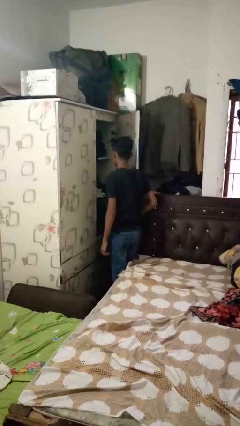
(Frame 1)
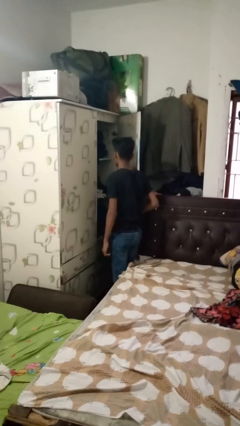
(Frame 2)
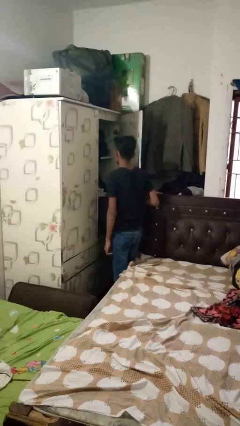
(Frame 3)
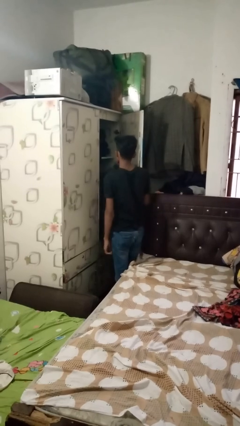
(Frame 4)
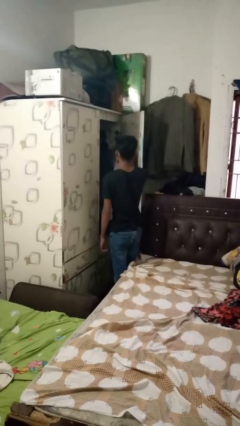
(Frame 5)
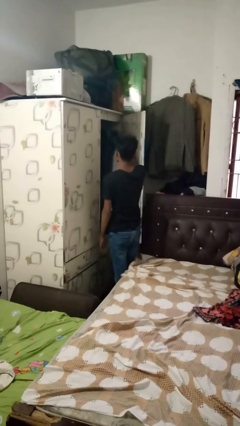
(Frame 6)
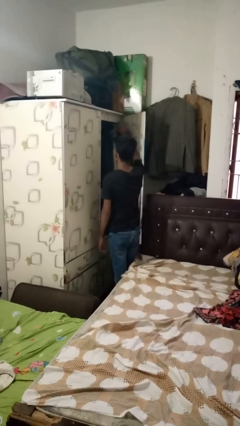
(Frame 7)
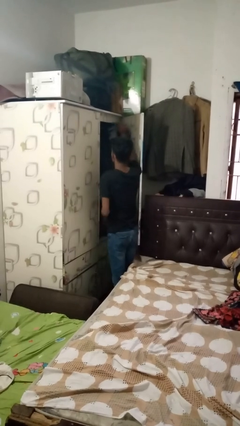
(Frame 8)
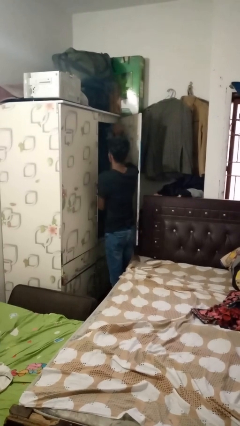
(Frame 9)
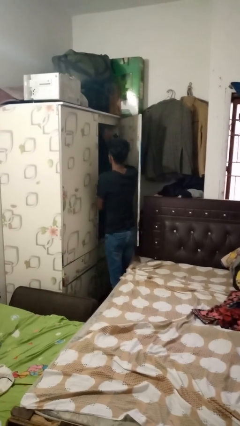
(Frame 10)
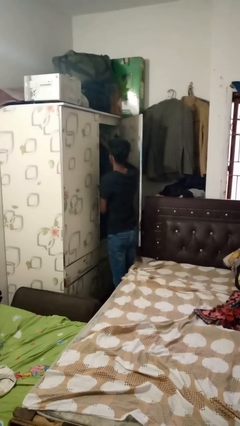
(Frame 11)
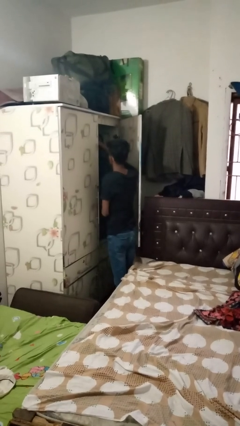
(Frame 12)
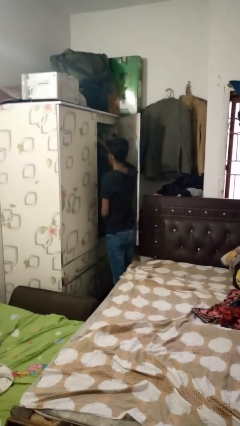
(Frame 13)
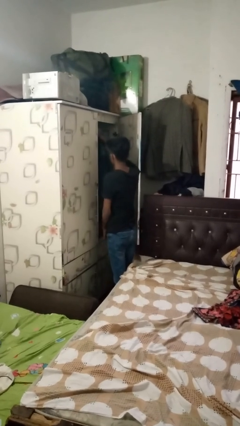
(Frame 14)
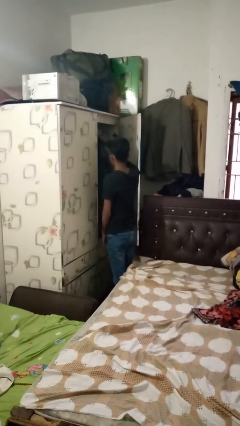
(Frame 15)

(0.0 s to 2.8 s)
person puts clothes into closet

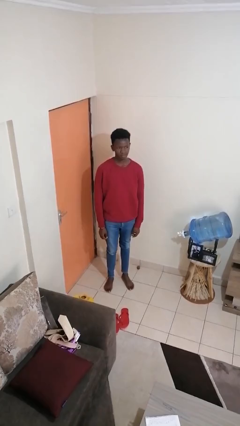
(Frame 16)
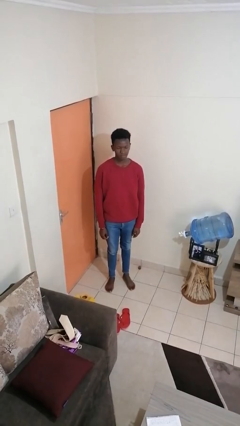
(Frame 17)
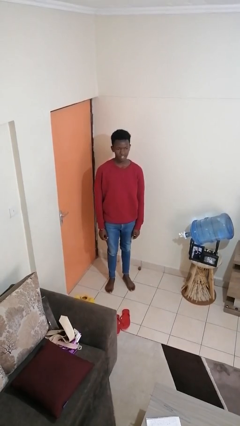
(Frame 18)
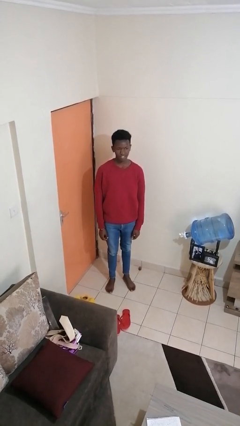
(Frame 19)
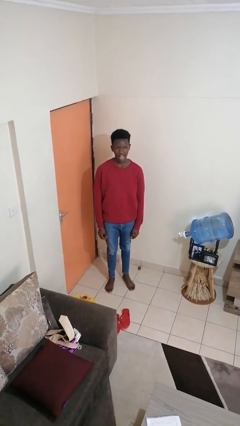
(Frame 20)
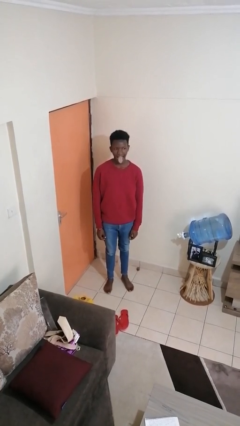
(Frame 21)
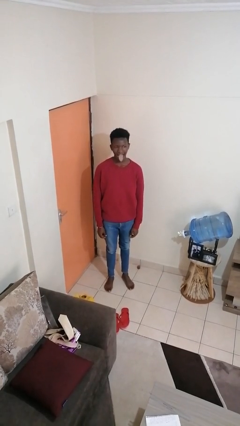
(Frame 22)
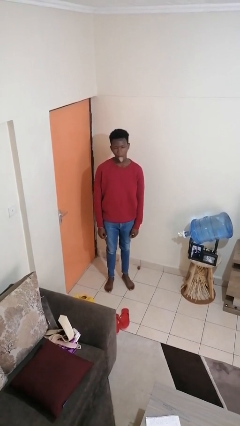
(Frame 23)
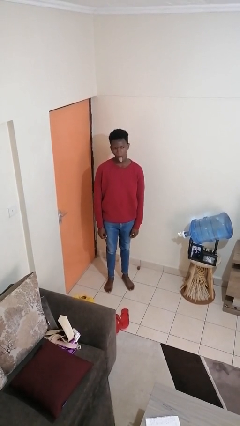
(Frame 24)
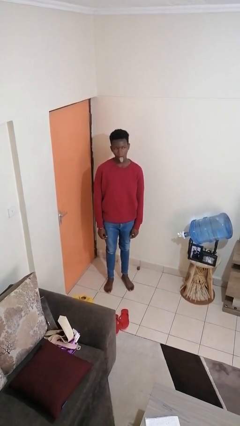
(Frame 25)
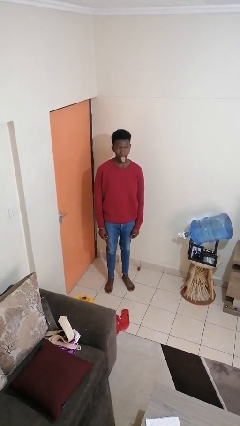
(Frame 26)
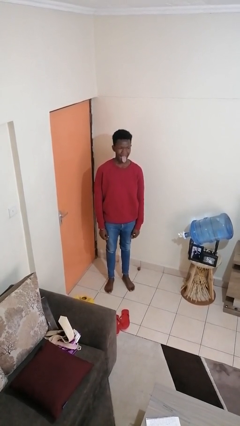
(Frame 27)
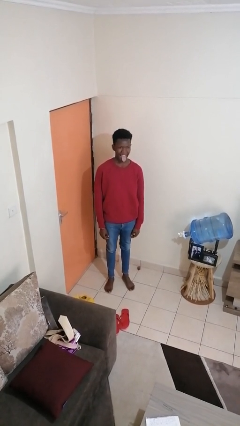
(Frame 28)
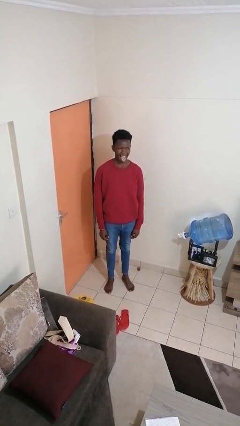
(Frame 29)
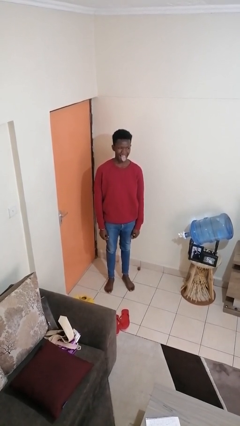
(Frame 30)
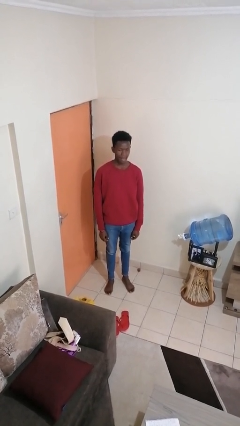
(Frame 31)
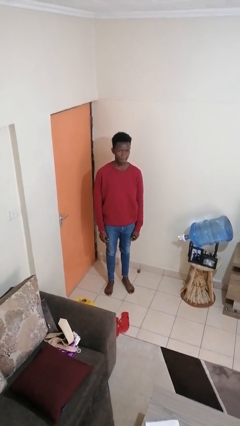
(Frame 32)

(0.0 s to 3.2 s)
person sticks out tongue

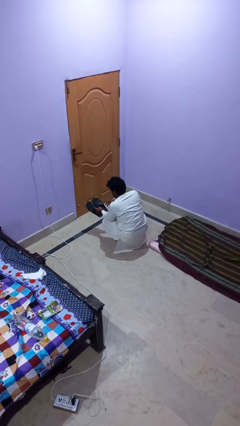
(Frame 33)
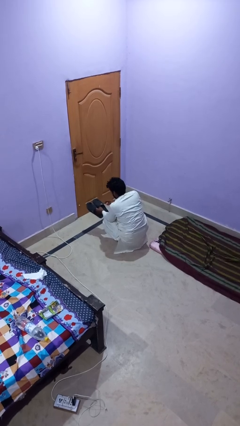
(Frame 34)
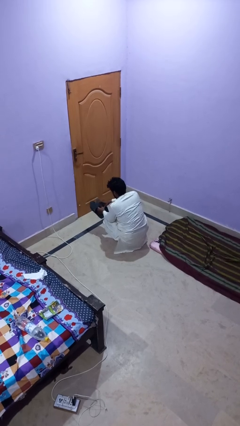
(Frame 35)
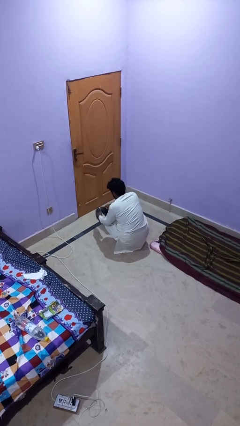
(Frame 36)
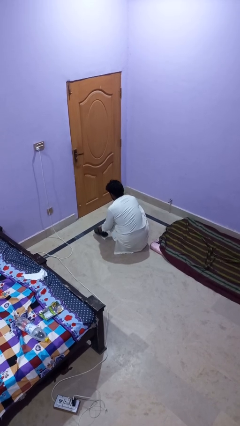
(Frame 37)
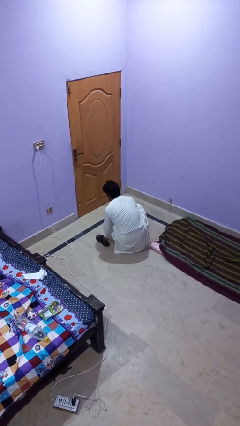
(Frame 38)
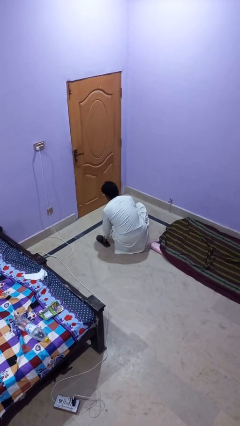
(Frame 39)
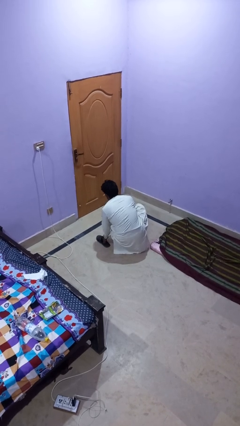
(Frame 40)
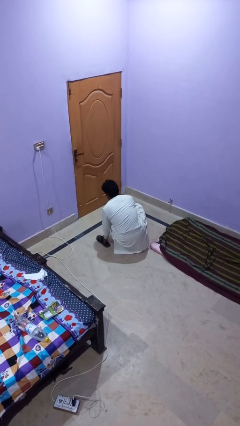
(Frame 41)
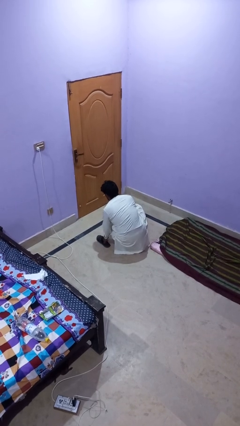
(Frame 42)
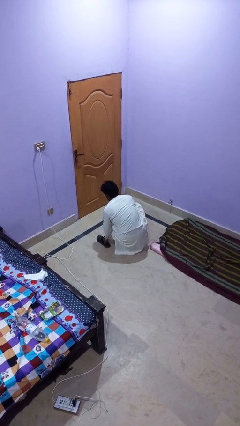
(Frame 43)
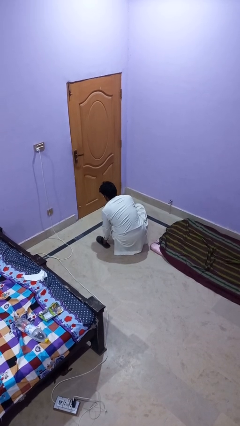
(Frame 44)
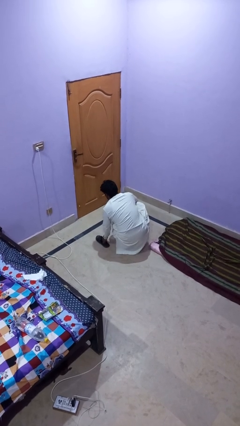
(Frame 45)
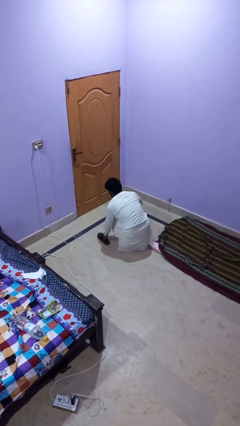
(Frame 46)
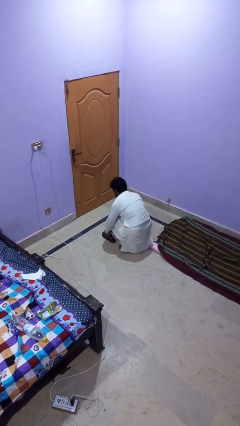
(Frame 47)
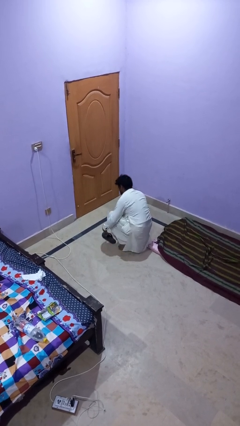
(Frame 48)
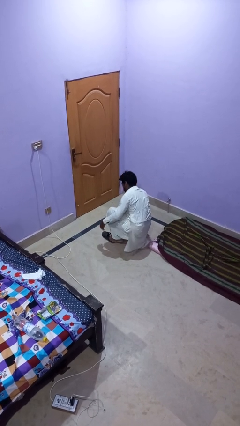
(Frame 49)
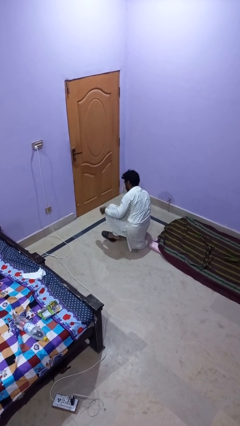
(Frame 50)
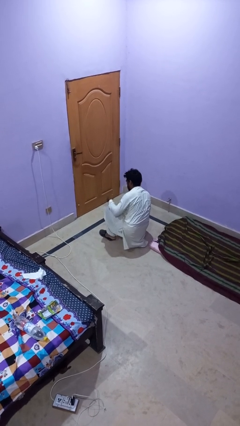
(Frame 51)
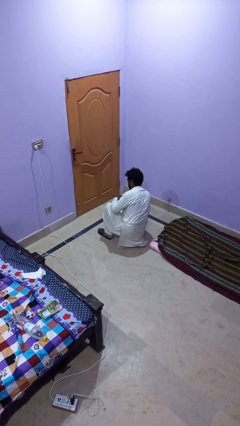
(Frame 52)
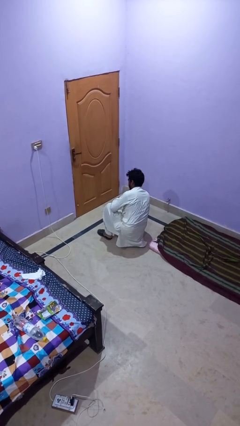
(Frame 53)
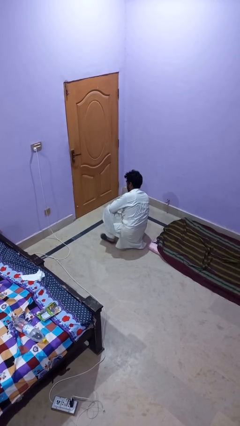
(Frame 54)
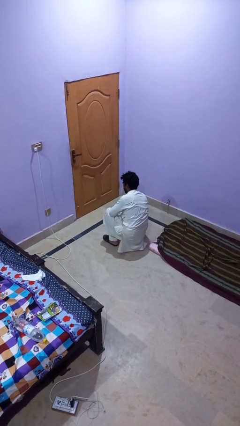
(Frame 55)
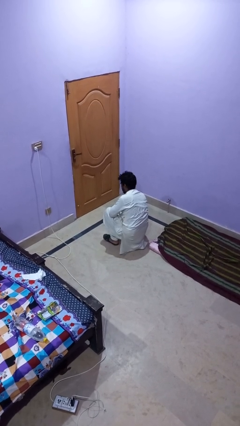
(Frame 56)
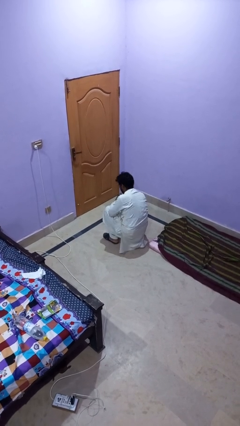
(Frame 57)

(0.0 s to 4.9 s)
person puts on shoes

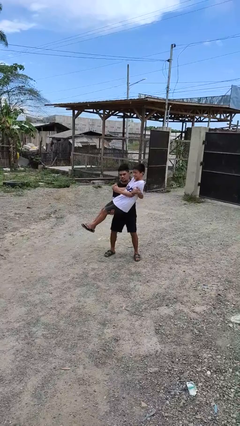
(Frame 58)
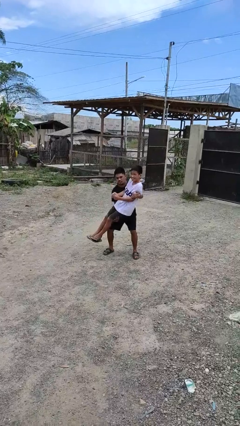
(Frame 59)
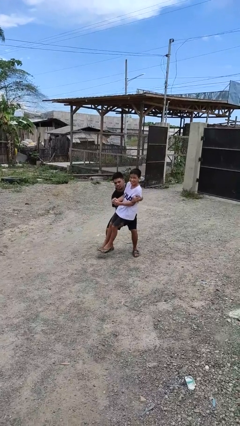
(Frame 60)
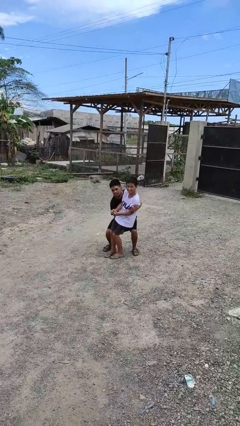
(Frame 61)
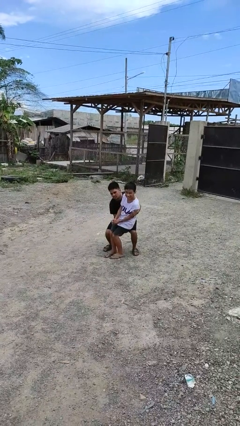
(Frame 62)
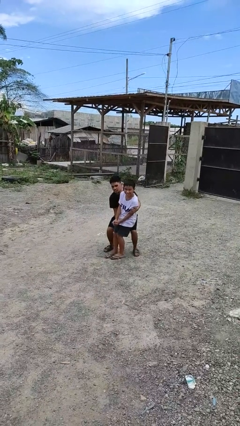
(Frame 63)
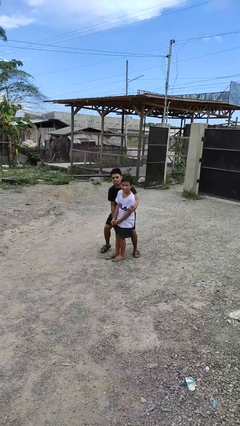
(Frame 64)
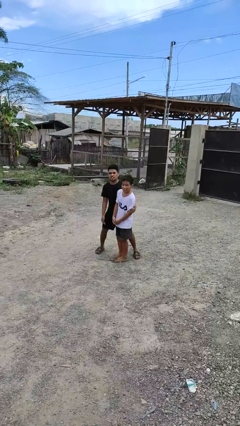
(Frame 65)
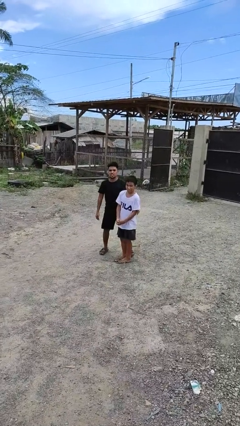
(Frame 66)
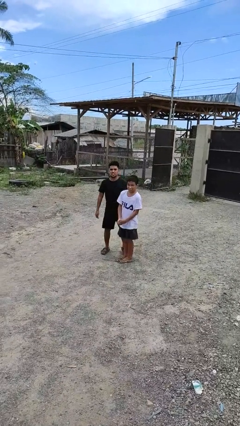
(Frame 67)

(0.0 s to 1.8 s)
person puts down person

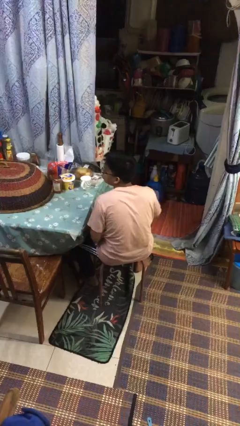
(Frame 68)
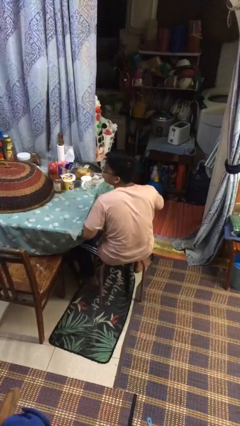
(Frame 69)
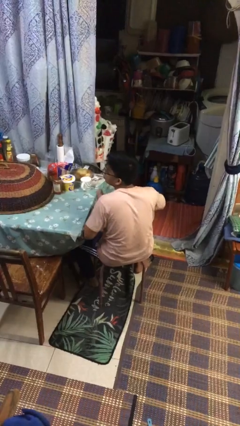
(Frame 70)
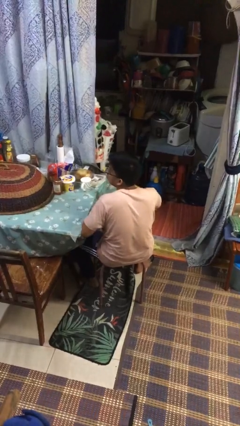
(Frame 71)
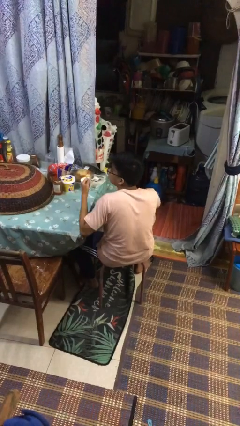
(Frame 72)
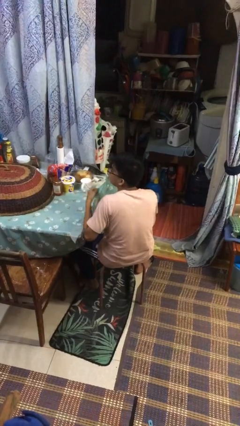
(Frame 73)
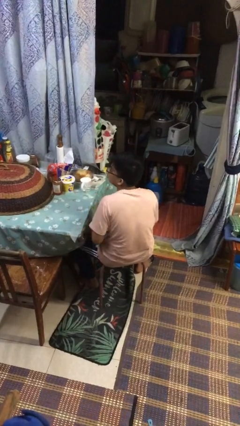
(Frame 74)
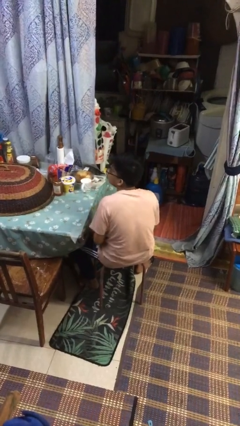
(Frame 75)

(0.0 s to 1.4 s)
person drums on chest

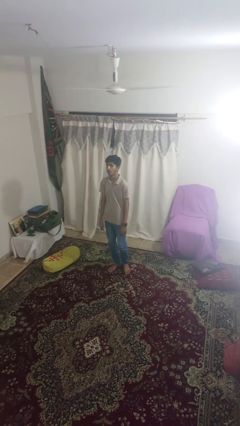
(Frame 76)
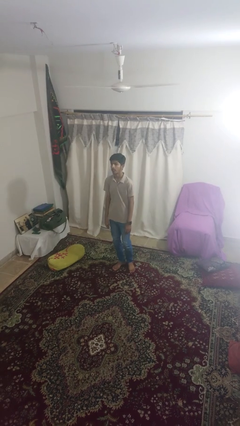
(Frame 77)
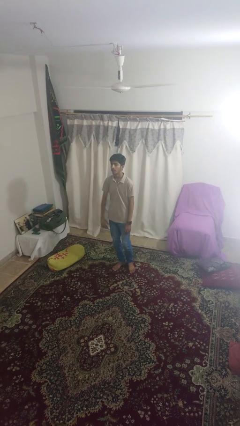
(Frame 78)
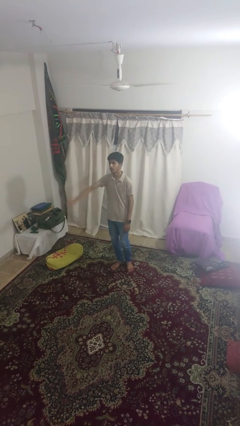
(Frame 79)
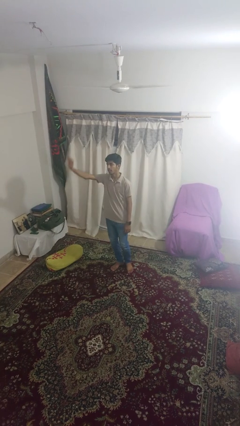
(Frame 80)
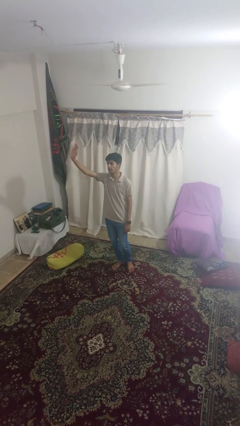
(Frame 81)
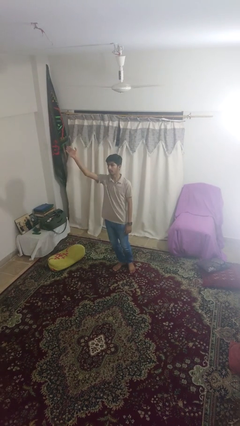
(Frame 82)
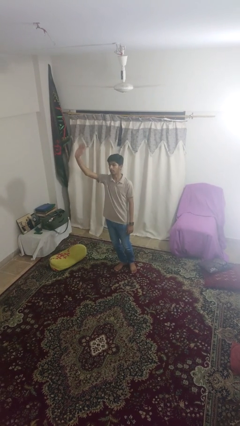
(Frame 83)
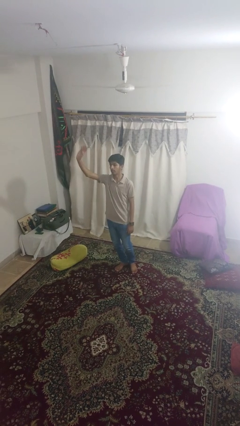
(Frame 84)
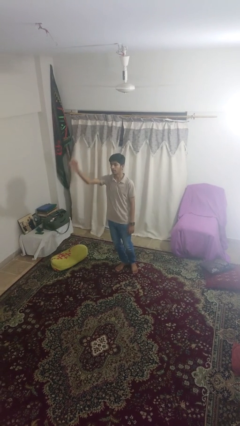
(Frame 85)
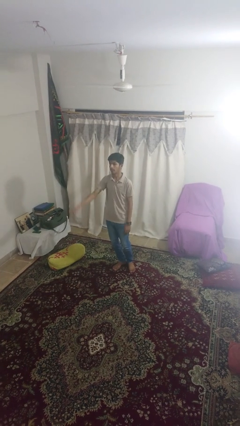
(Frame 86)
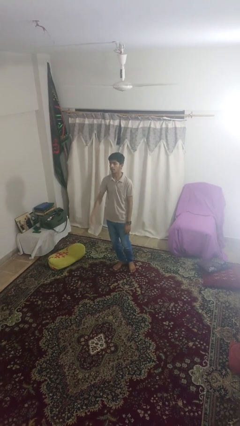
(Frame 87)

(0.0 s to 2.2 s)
person waves at person

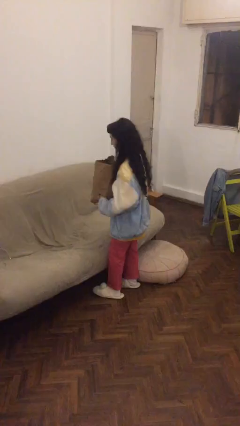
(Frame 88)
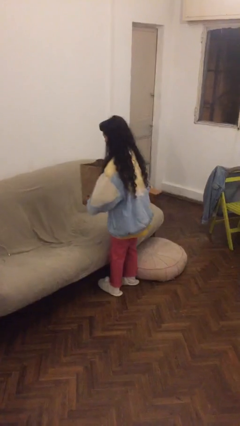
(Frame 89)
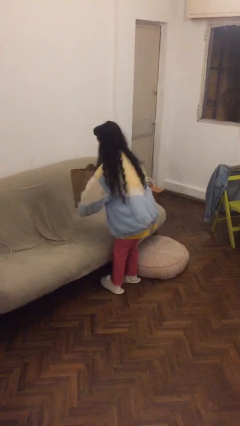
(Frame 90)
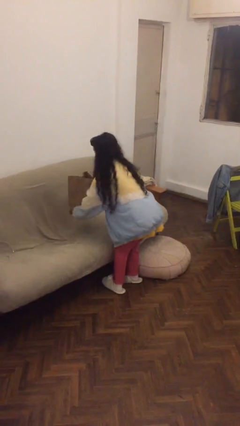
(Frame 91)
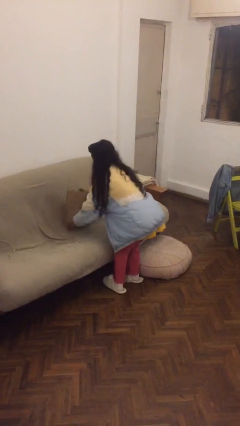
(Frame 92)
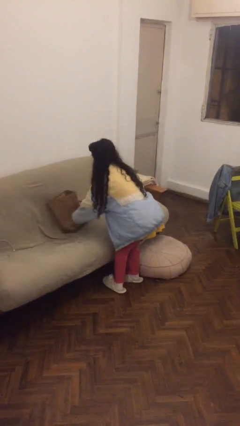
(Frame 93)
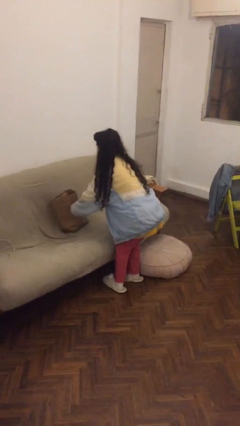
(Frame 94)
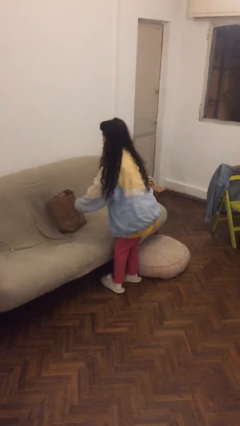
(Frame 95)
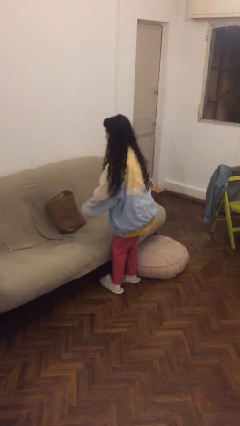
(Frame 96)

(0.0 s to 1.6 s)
person puts down object on couch
